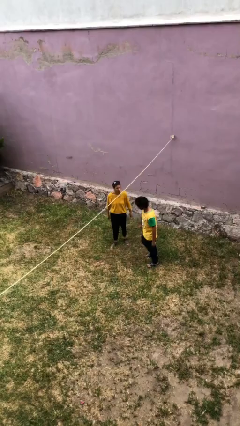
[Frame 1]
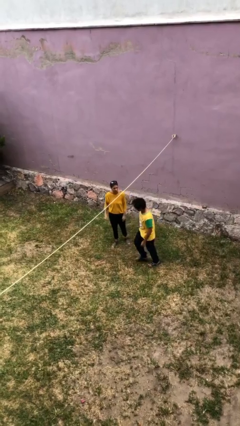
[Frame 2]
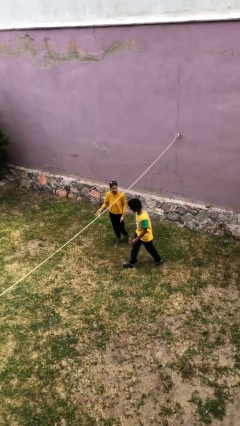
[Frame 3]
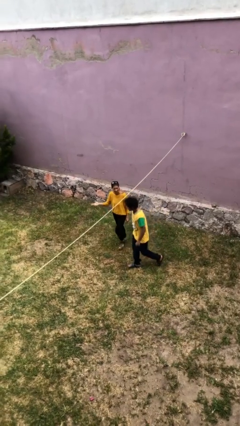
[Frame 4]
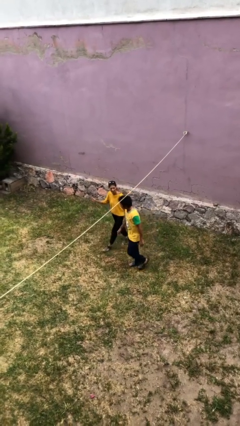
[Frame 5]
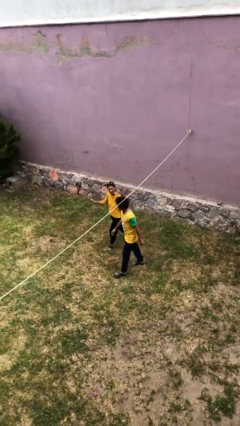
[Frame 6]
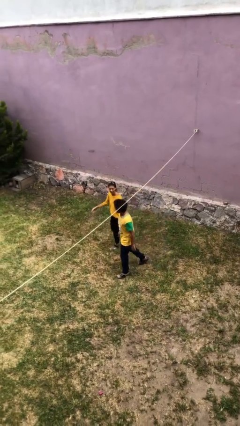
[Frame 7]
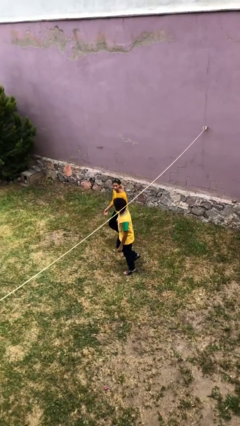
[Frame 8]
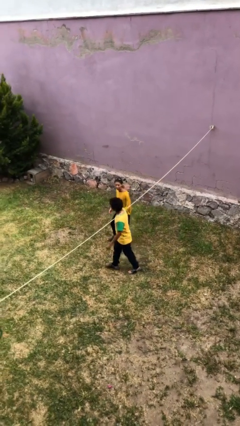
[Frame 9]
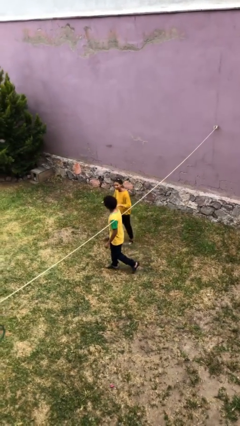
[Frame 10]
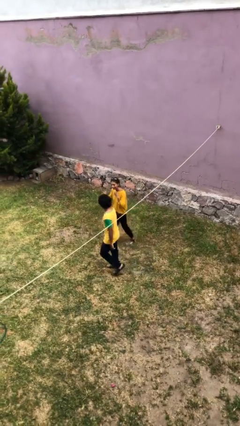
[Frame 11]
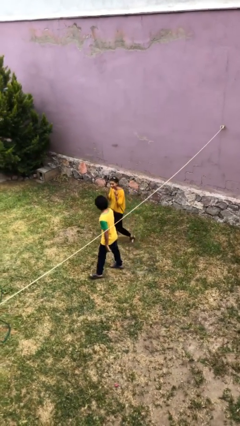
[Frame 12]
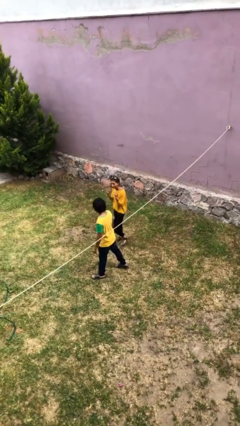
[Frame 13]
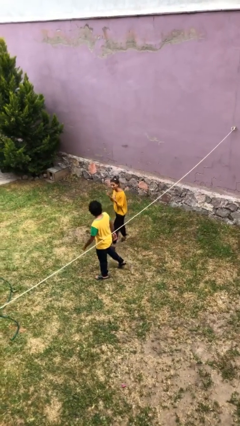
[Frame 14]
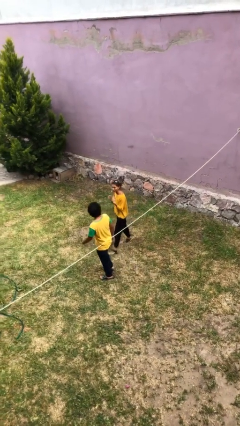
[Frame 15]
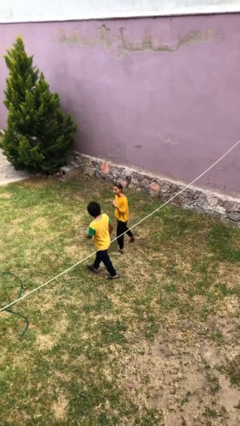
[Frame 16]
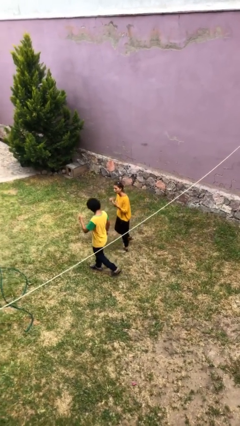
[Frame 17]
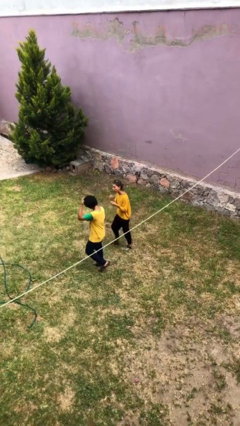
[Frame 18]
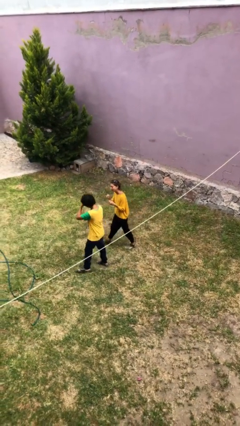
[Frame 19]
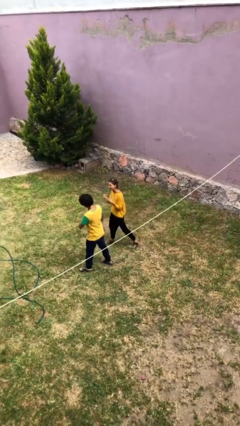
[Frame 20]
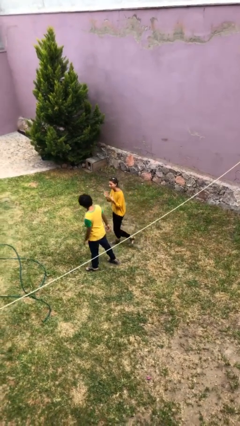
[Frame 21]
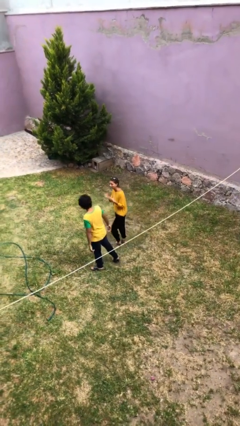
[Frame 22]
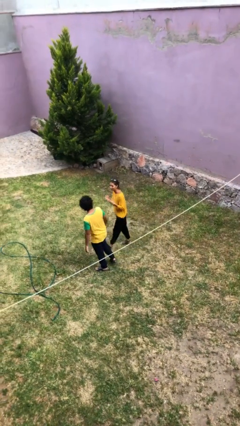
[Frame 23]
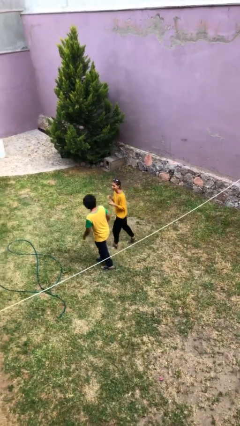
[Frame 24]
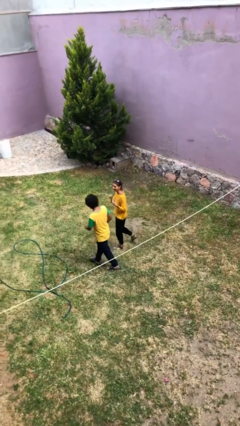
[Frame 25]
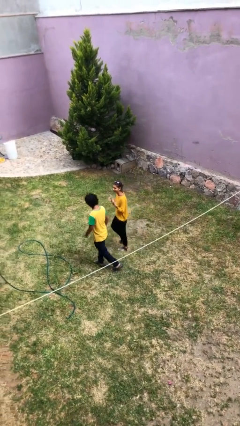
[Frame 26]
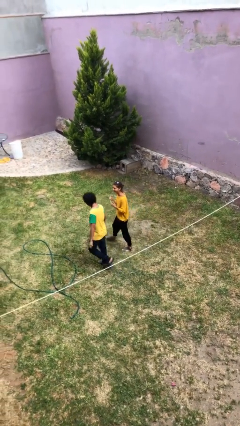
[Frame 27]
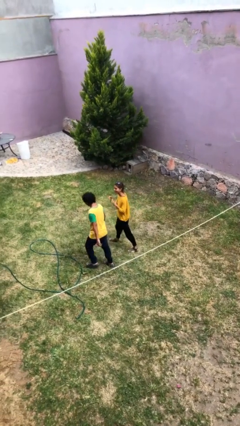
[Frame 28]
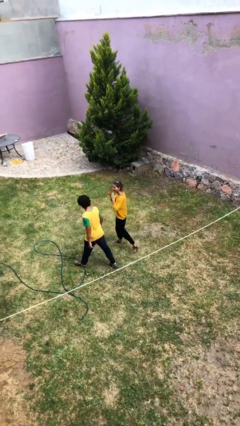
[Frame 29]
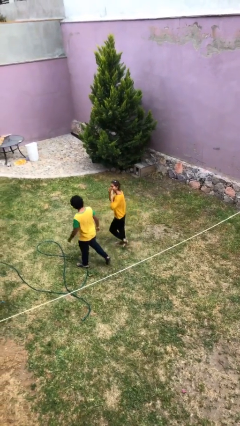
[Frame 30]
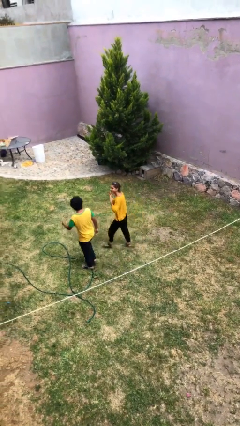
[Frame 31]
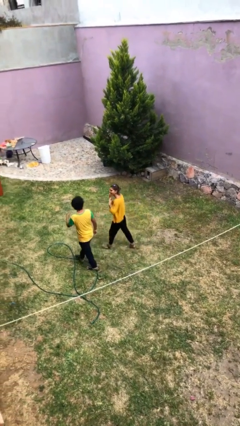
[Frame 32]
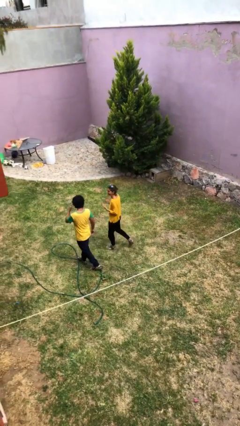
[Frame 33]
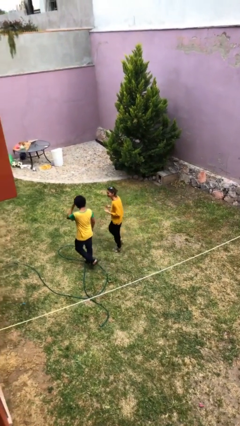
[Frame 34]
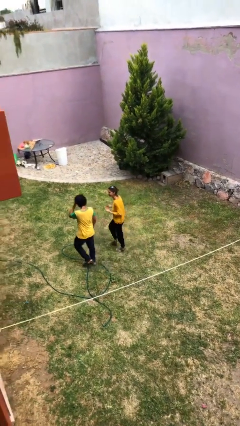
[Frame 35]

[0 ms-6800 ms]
person talks to person

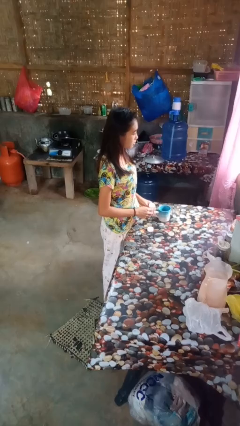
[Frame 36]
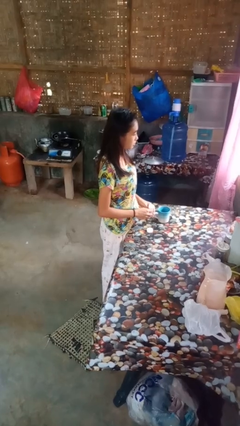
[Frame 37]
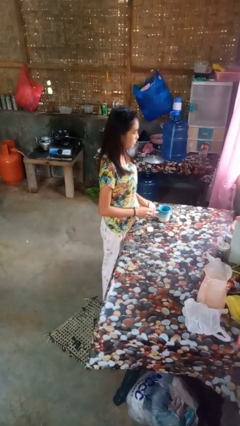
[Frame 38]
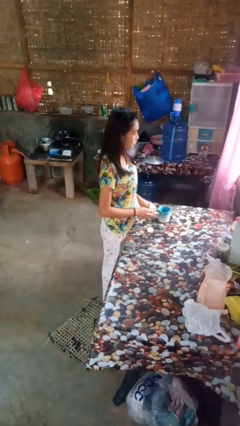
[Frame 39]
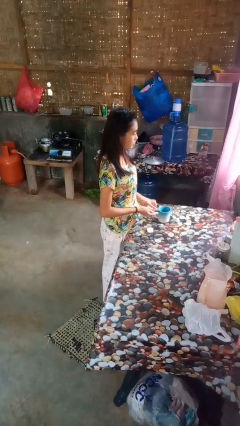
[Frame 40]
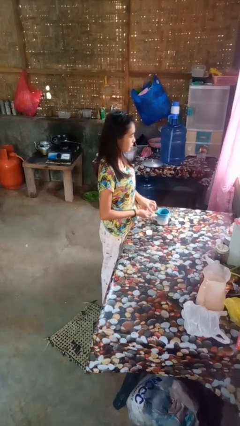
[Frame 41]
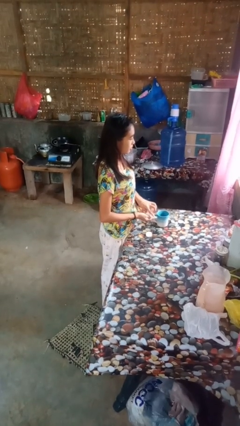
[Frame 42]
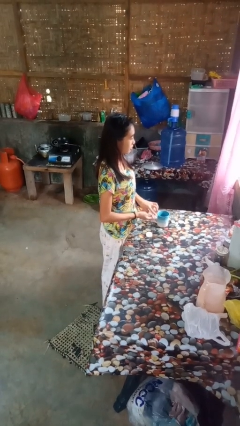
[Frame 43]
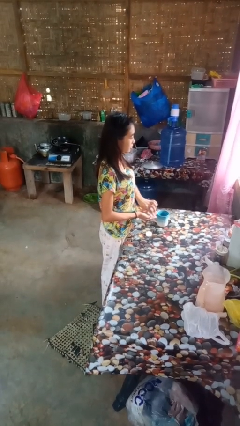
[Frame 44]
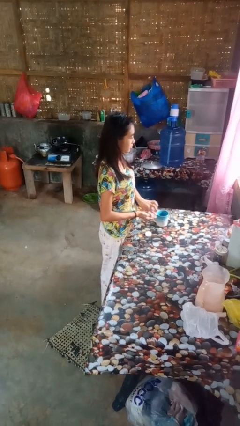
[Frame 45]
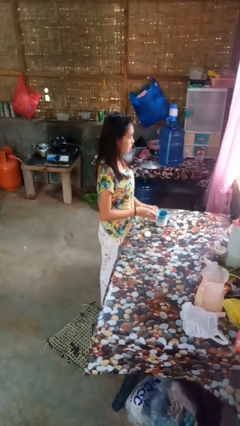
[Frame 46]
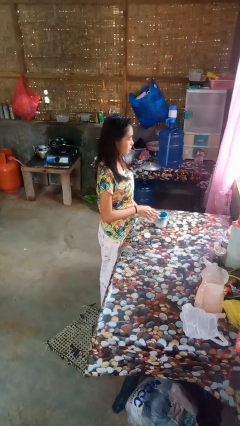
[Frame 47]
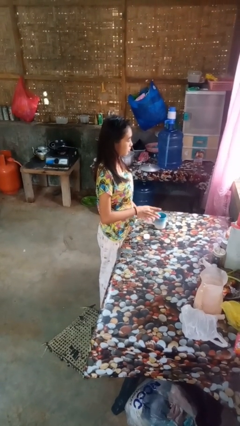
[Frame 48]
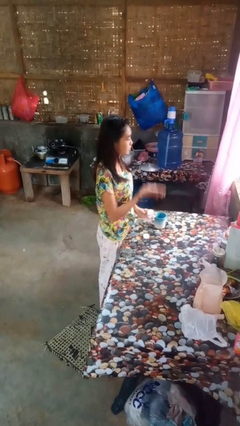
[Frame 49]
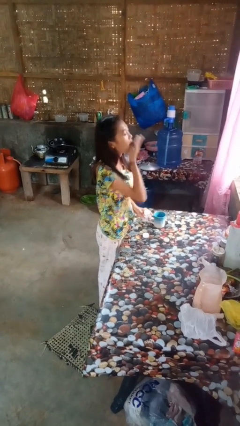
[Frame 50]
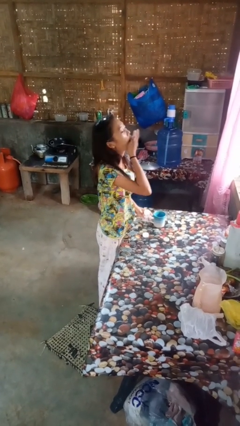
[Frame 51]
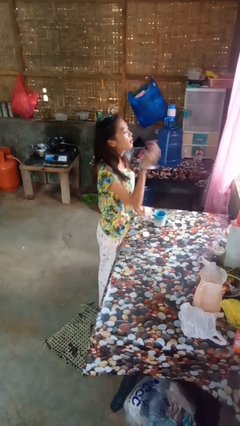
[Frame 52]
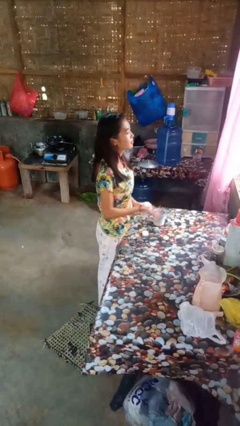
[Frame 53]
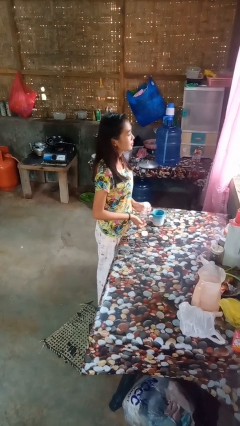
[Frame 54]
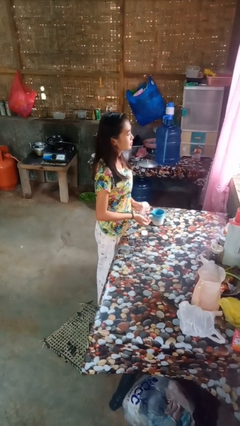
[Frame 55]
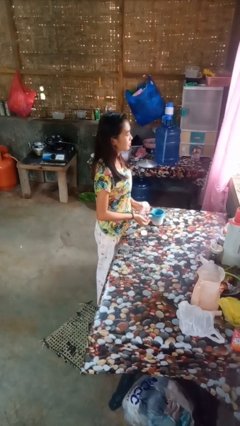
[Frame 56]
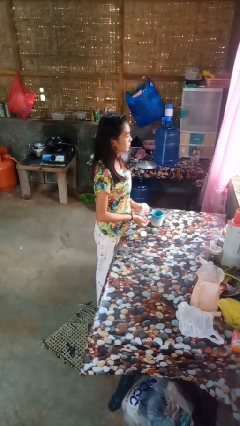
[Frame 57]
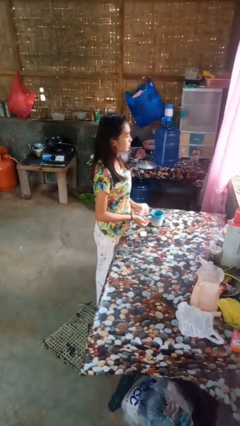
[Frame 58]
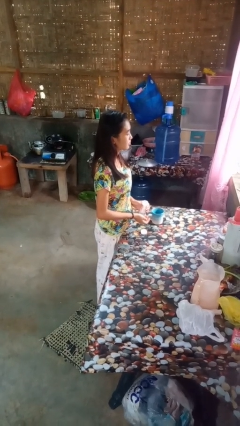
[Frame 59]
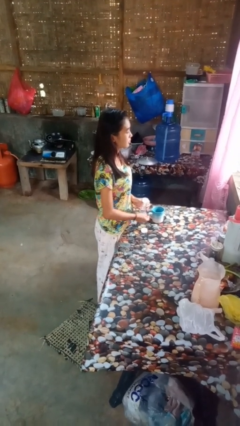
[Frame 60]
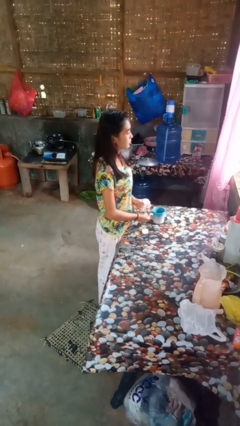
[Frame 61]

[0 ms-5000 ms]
person takes medicine pills

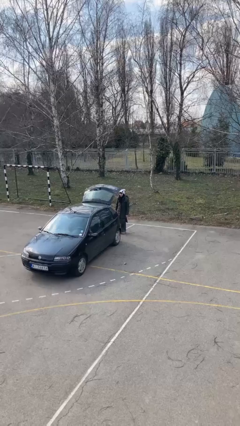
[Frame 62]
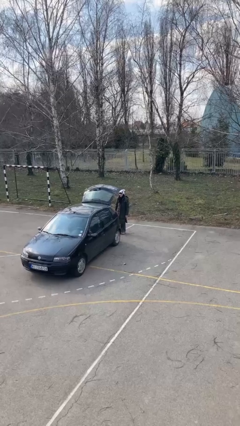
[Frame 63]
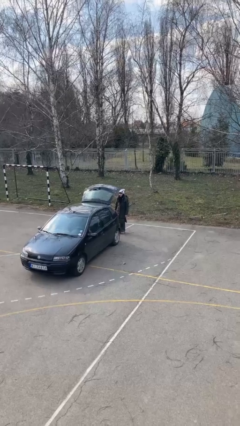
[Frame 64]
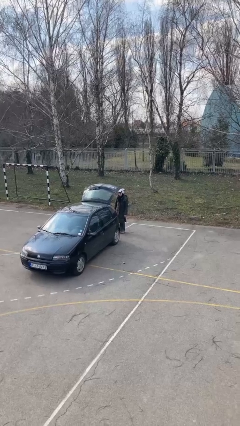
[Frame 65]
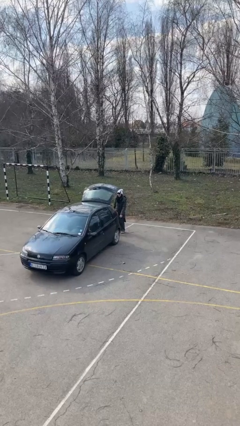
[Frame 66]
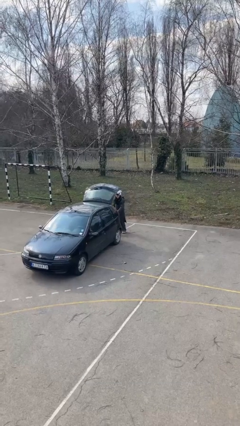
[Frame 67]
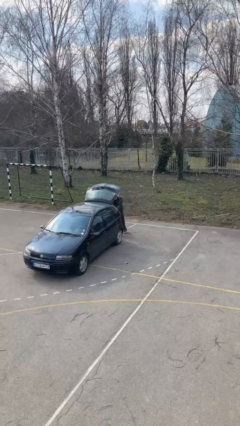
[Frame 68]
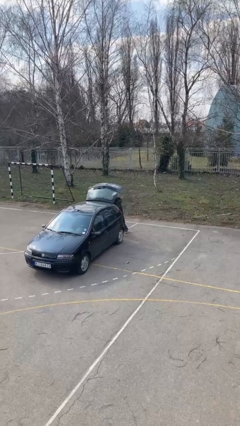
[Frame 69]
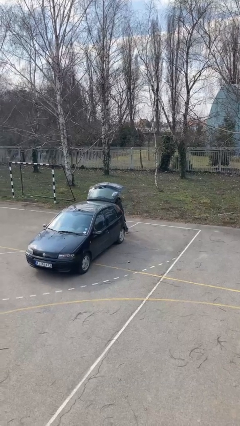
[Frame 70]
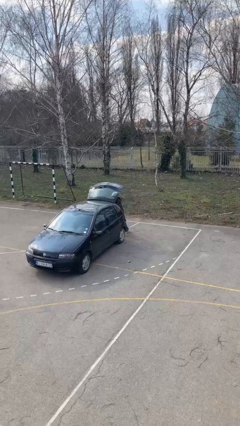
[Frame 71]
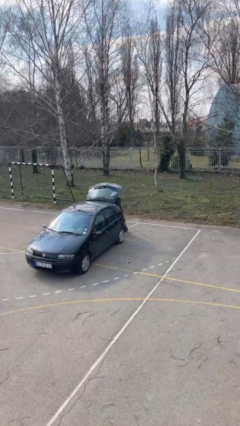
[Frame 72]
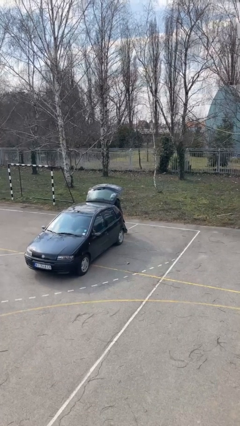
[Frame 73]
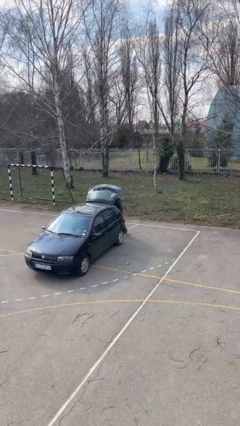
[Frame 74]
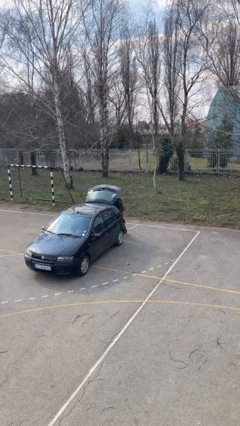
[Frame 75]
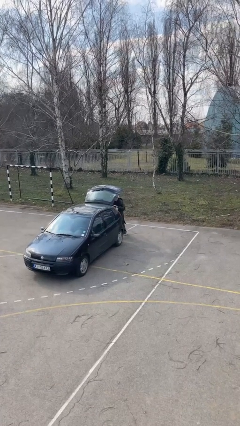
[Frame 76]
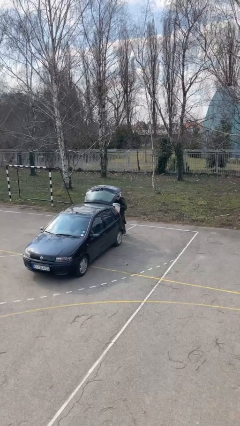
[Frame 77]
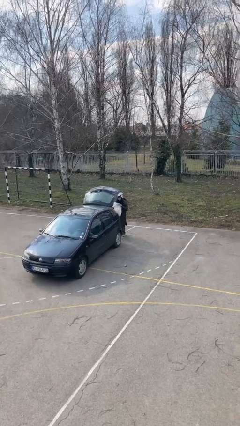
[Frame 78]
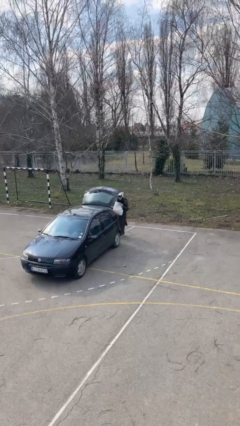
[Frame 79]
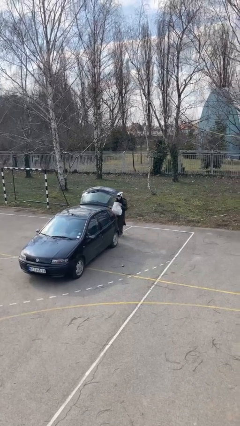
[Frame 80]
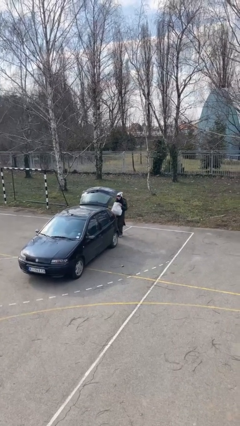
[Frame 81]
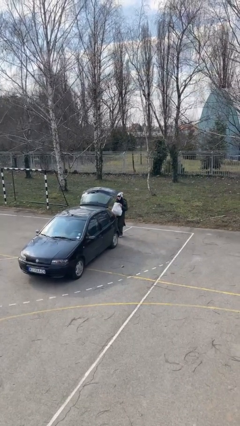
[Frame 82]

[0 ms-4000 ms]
person unloads car

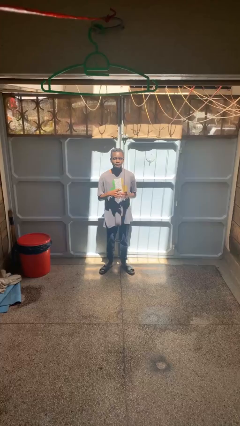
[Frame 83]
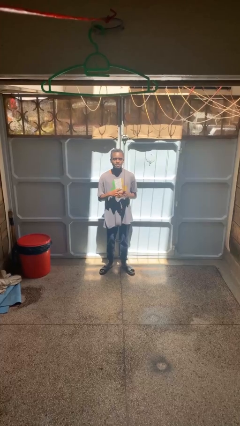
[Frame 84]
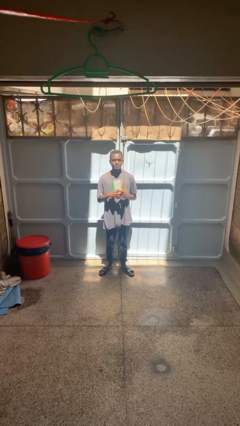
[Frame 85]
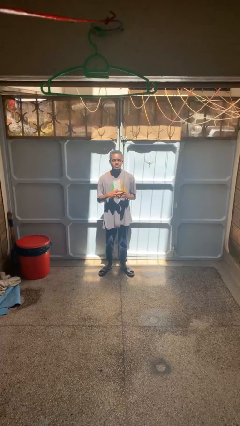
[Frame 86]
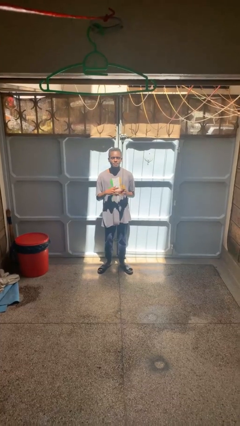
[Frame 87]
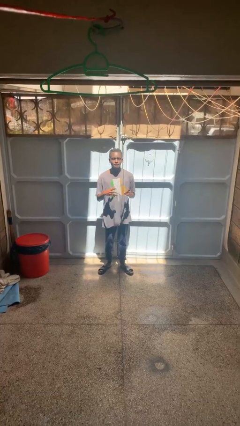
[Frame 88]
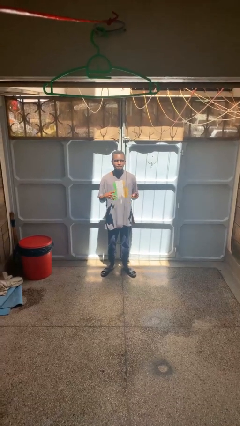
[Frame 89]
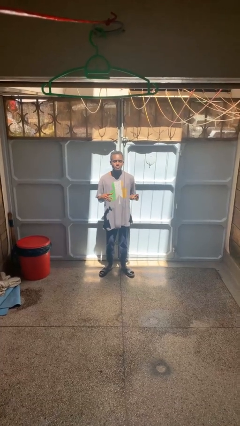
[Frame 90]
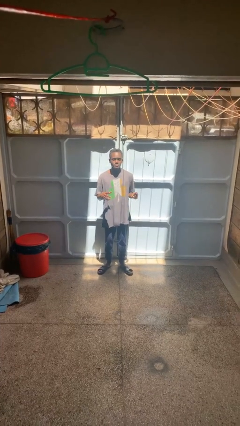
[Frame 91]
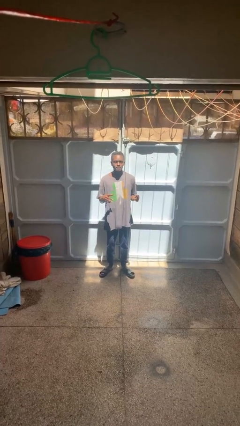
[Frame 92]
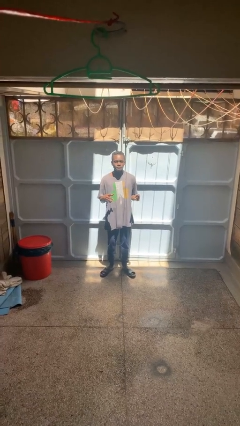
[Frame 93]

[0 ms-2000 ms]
person takes off ring
